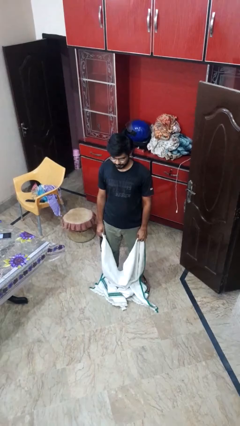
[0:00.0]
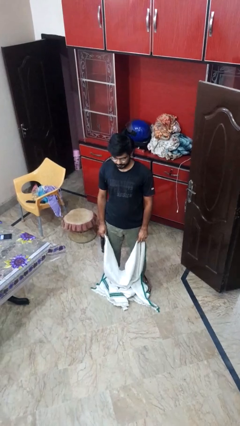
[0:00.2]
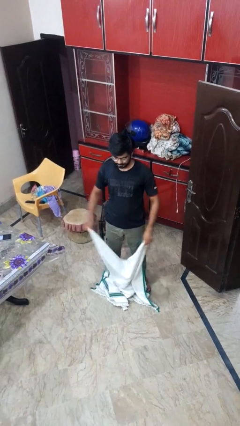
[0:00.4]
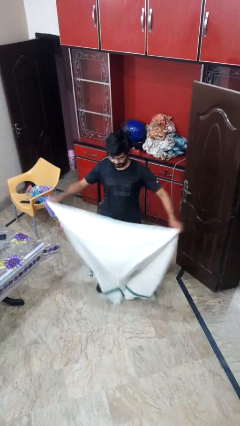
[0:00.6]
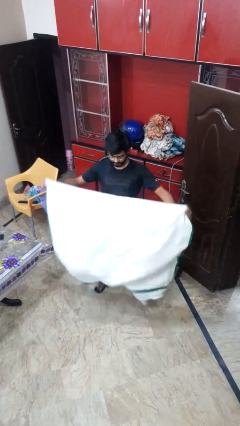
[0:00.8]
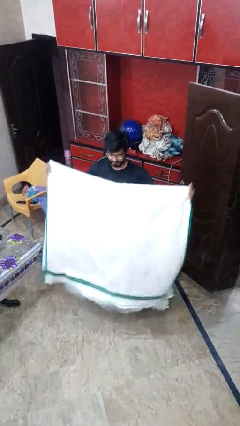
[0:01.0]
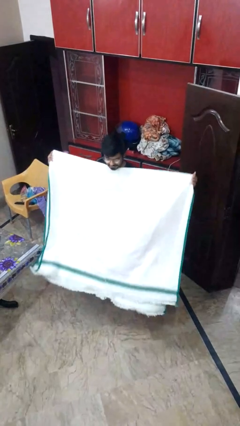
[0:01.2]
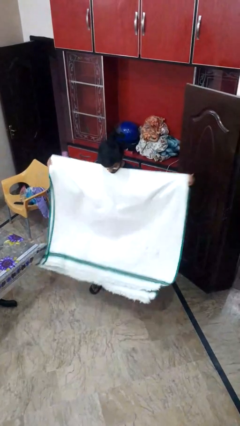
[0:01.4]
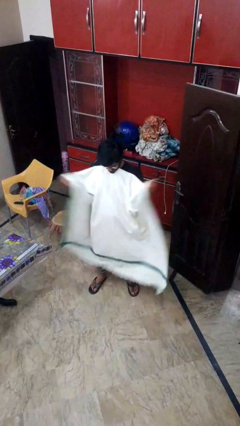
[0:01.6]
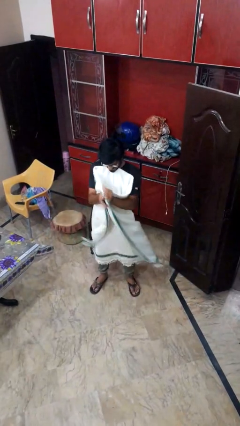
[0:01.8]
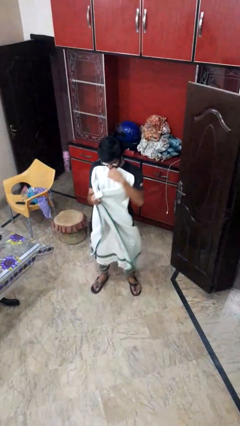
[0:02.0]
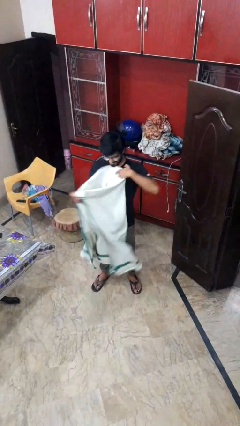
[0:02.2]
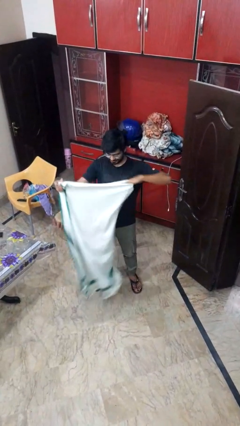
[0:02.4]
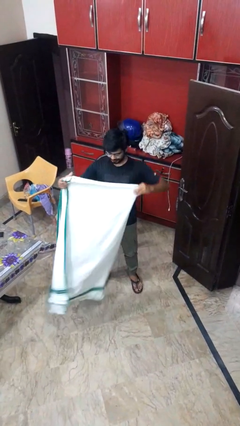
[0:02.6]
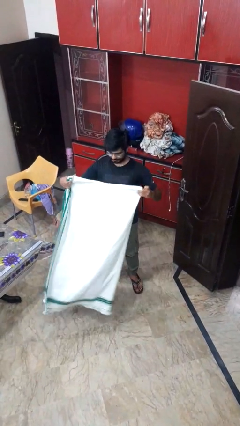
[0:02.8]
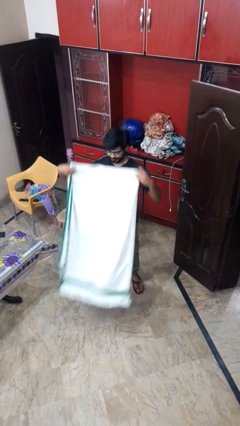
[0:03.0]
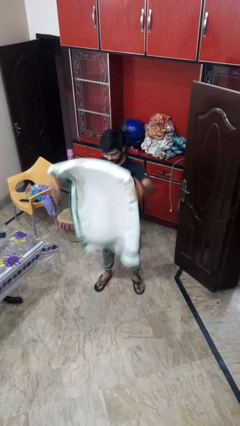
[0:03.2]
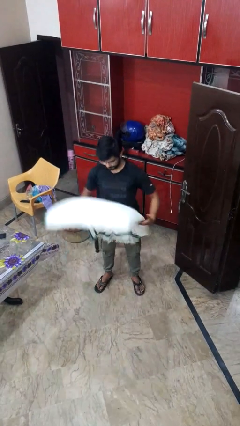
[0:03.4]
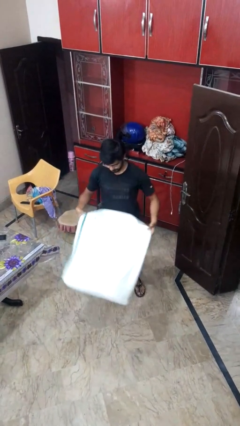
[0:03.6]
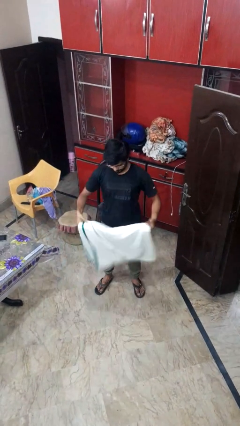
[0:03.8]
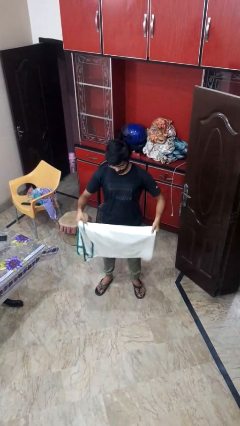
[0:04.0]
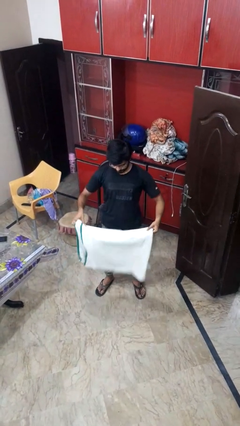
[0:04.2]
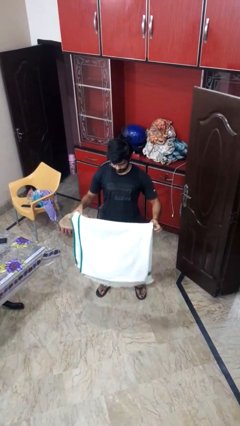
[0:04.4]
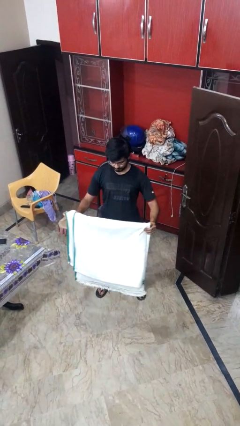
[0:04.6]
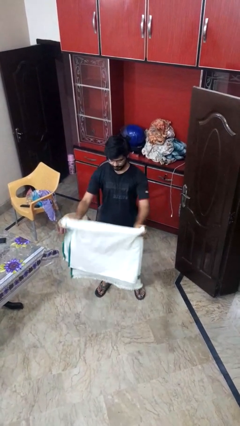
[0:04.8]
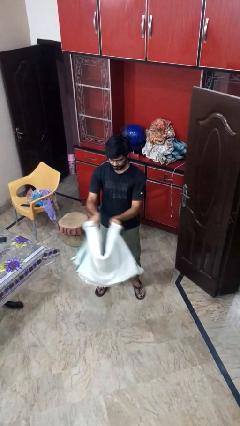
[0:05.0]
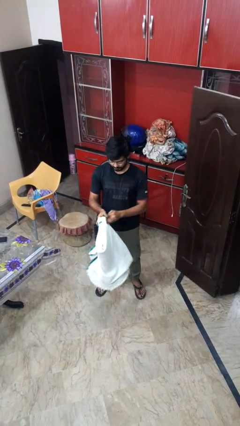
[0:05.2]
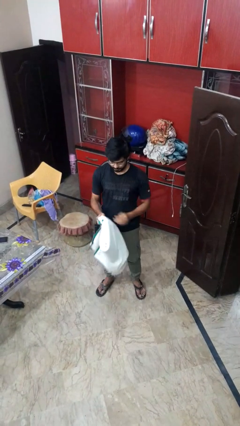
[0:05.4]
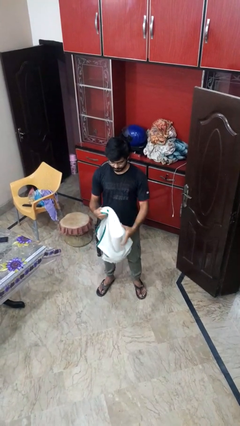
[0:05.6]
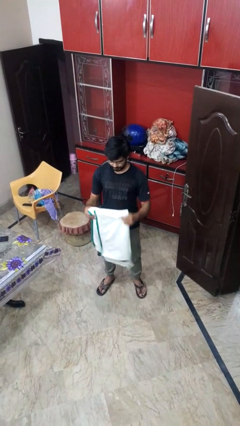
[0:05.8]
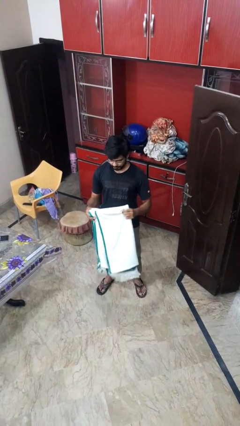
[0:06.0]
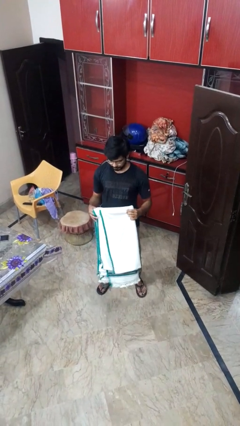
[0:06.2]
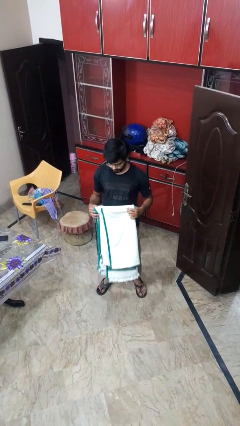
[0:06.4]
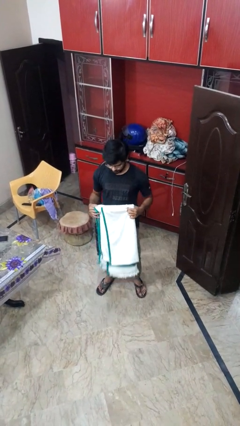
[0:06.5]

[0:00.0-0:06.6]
person folds blanket

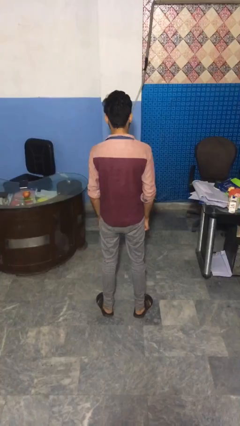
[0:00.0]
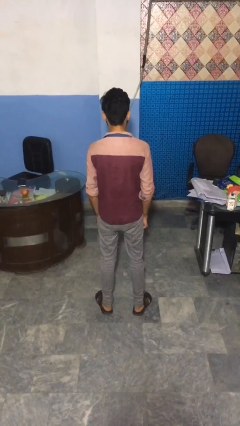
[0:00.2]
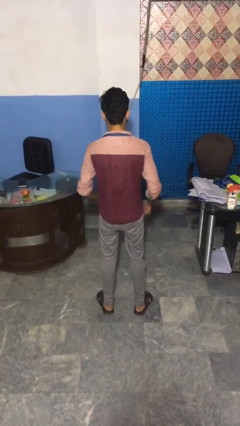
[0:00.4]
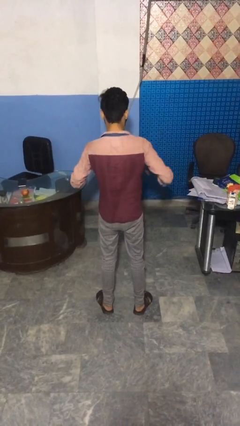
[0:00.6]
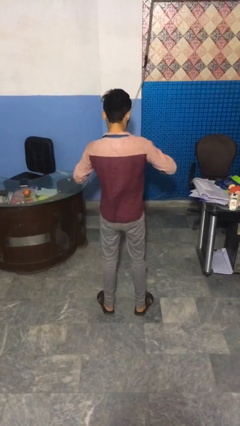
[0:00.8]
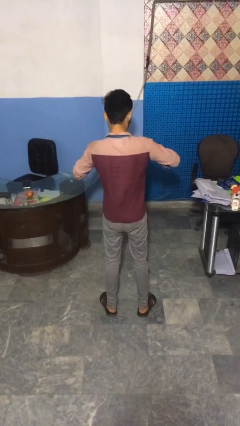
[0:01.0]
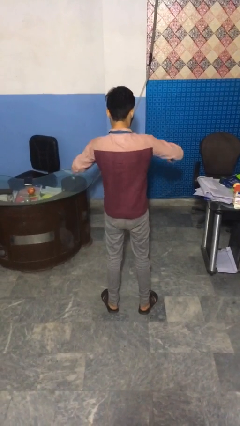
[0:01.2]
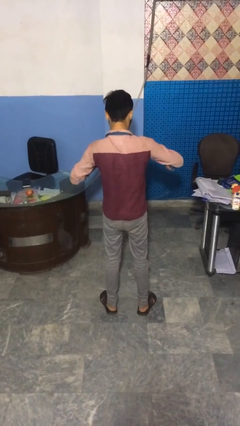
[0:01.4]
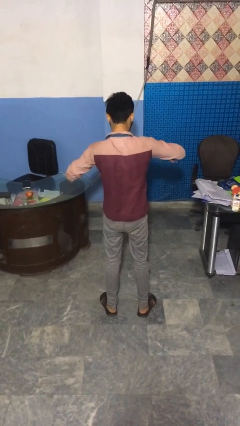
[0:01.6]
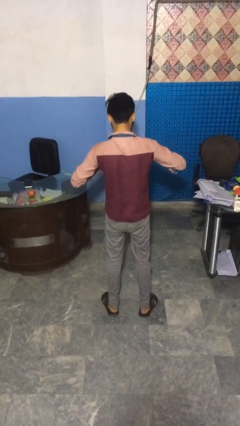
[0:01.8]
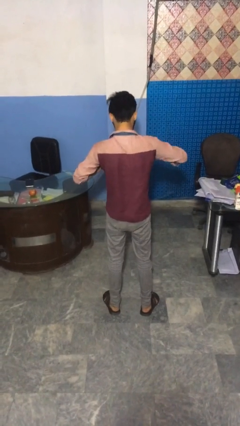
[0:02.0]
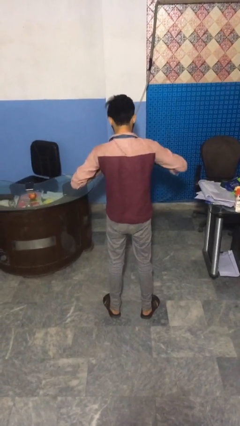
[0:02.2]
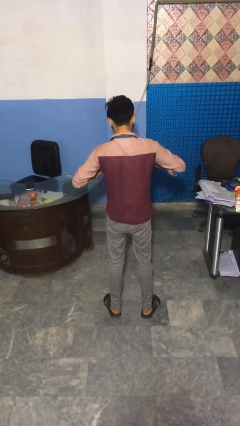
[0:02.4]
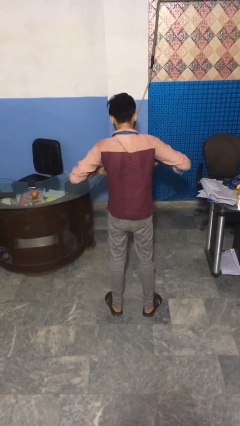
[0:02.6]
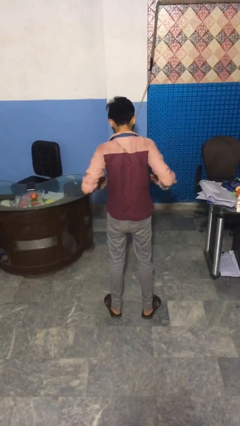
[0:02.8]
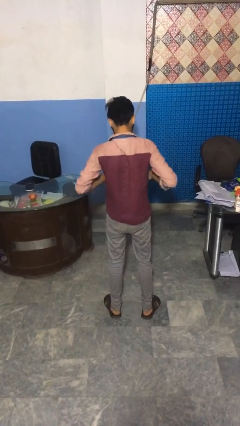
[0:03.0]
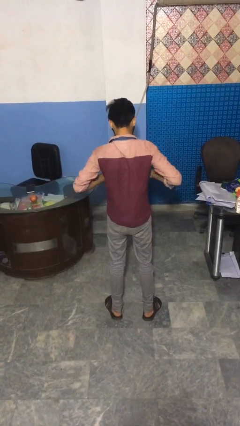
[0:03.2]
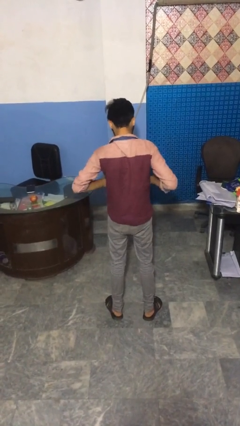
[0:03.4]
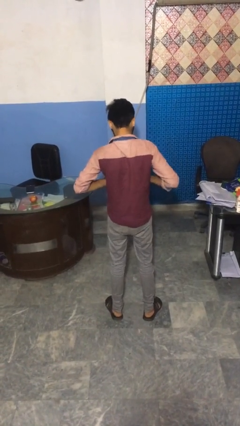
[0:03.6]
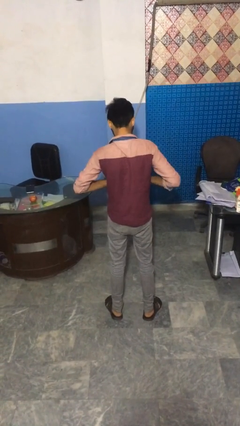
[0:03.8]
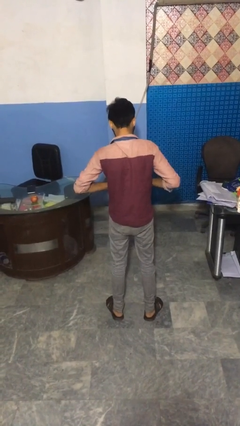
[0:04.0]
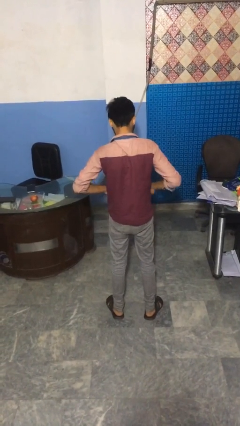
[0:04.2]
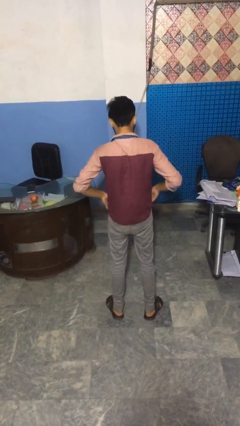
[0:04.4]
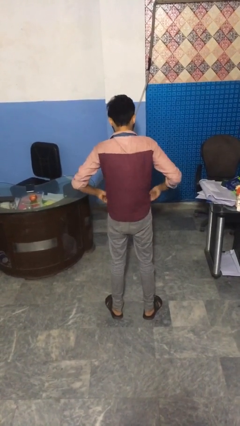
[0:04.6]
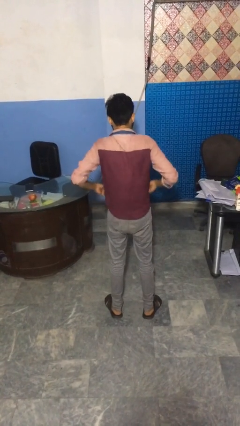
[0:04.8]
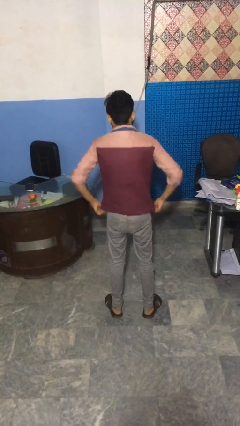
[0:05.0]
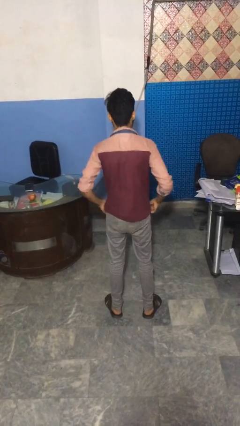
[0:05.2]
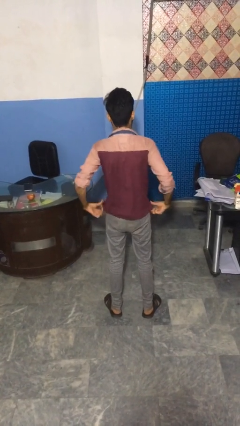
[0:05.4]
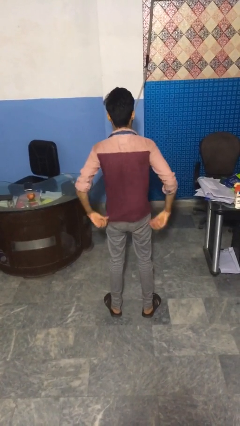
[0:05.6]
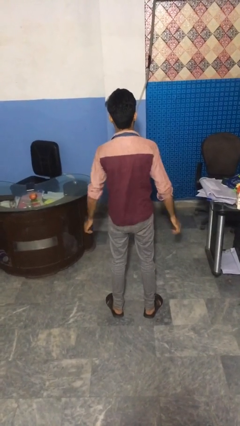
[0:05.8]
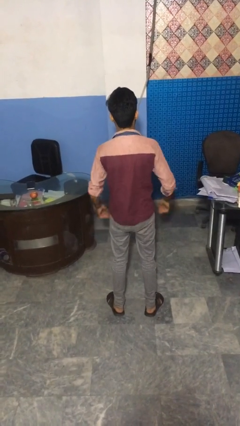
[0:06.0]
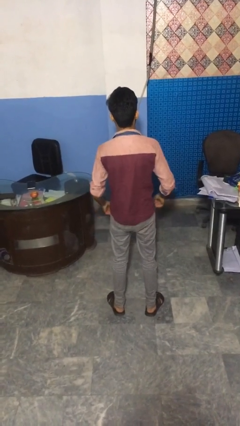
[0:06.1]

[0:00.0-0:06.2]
person unbuttons shirt

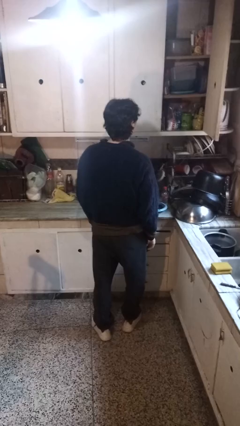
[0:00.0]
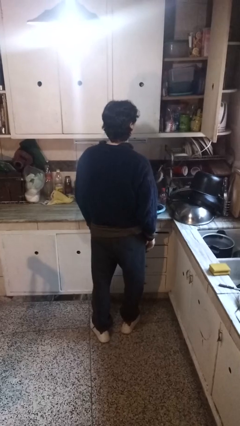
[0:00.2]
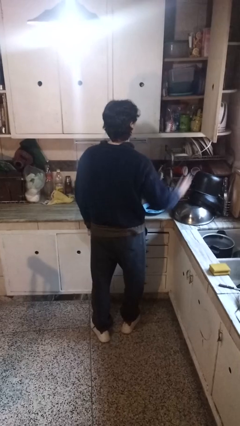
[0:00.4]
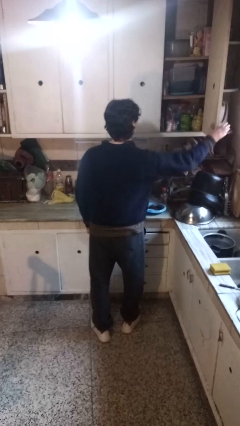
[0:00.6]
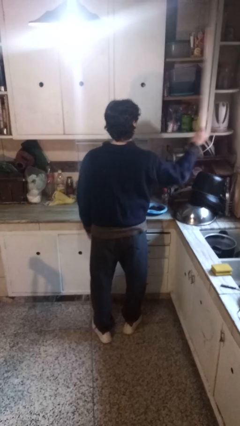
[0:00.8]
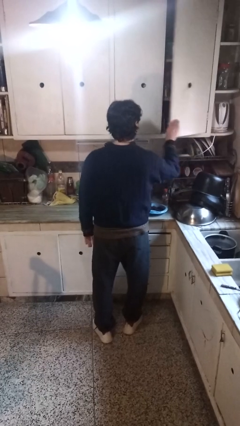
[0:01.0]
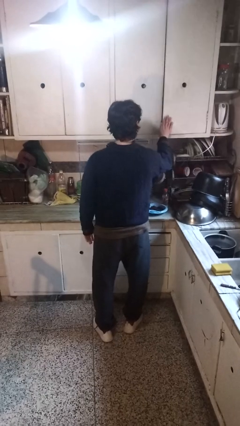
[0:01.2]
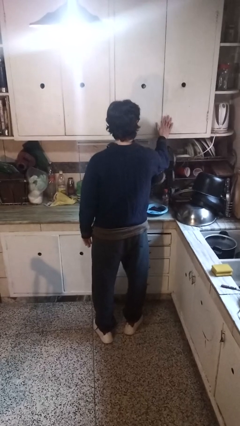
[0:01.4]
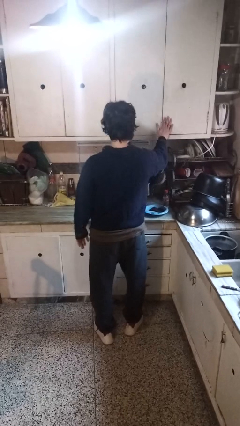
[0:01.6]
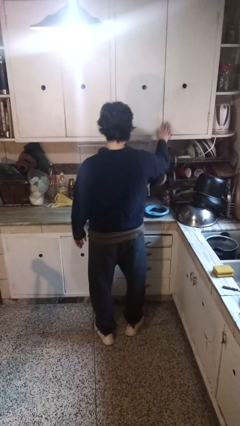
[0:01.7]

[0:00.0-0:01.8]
person closes cabinet

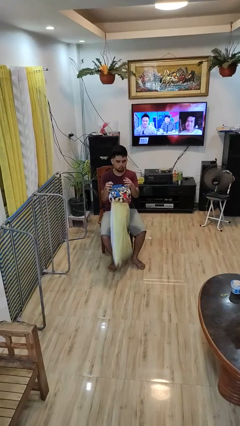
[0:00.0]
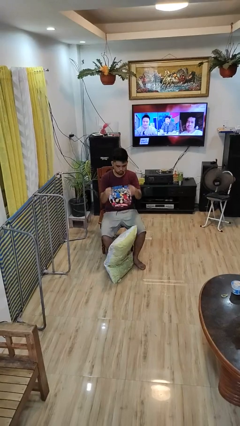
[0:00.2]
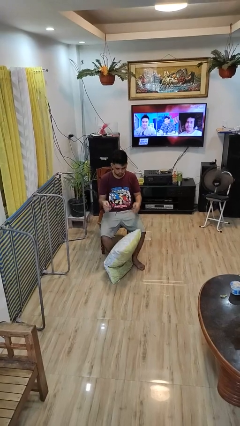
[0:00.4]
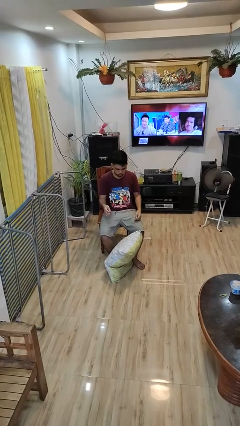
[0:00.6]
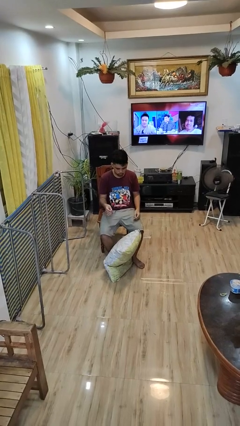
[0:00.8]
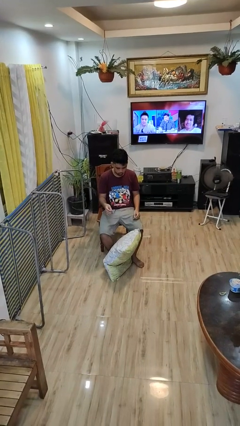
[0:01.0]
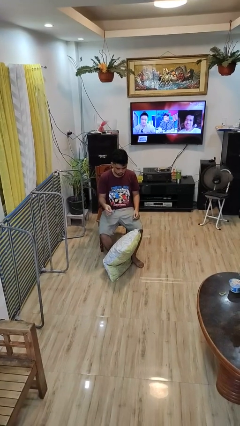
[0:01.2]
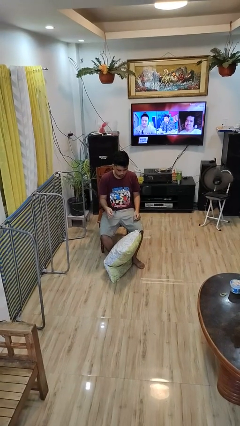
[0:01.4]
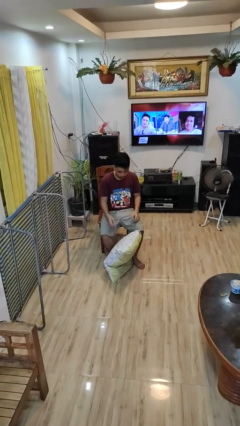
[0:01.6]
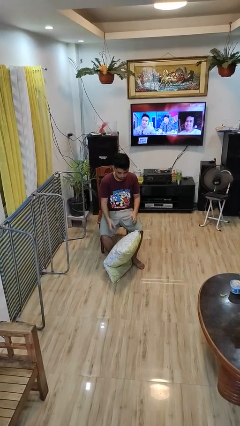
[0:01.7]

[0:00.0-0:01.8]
person drops object

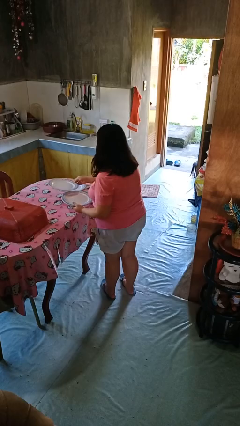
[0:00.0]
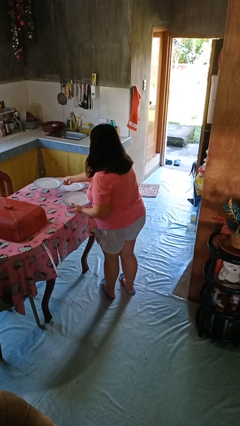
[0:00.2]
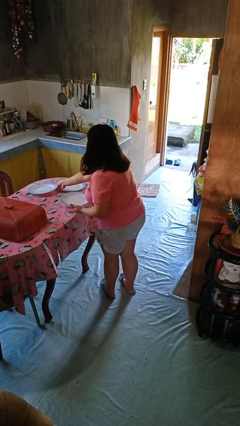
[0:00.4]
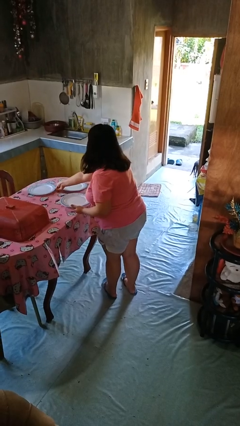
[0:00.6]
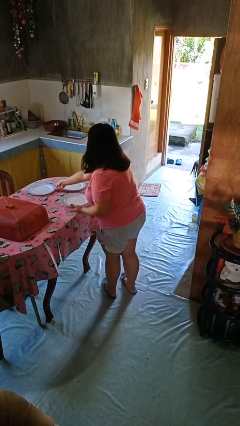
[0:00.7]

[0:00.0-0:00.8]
person sets table

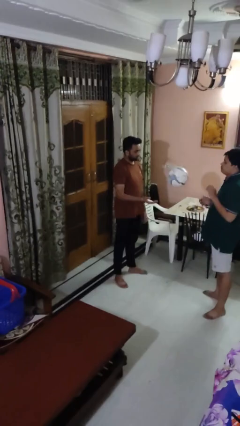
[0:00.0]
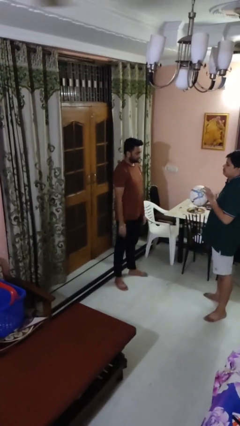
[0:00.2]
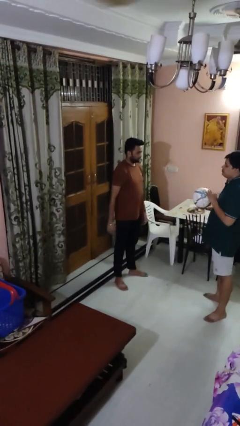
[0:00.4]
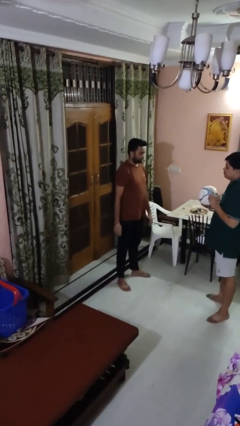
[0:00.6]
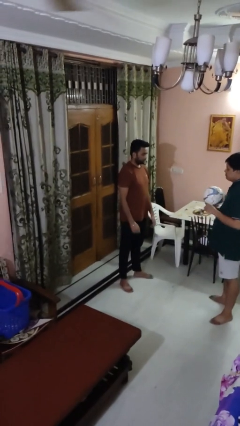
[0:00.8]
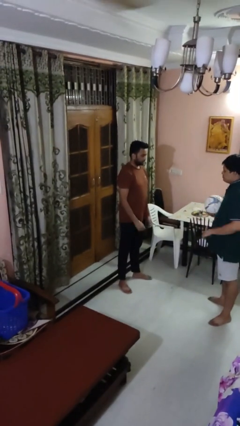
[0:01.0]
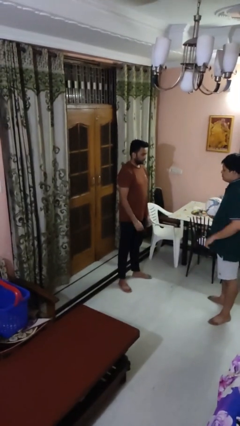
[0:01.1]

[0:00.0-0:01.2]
person throws object to person
